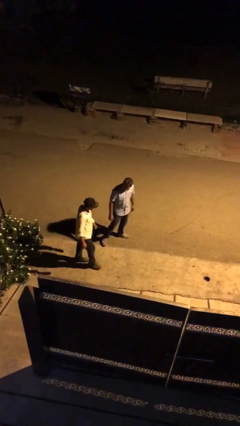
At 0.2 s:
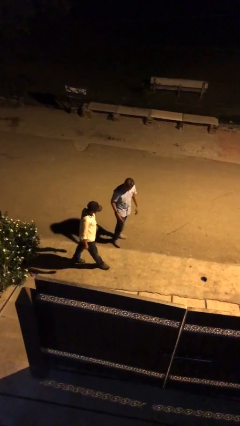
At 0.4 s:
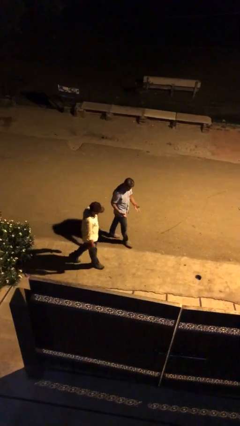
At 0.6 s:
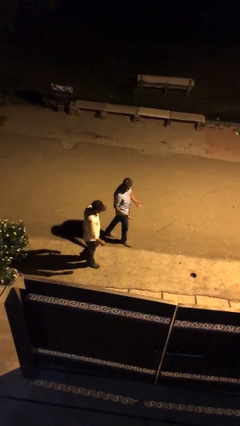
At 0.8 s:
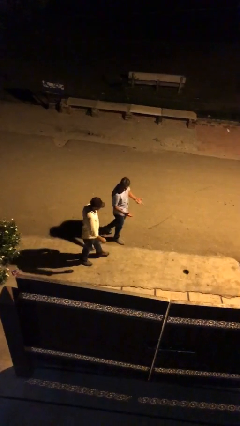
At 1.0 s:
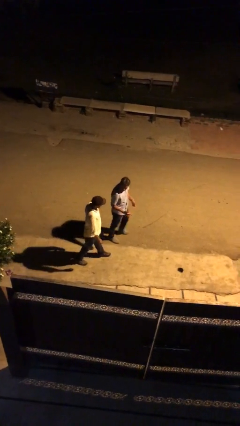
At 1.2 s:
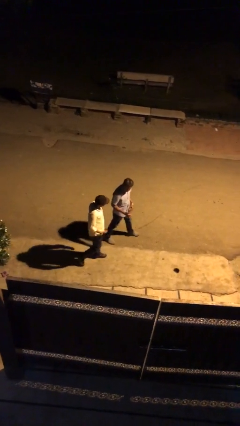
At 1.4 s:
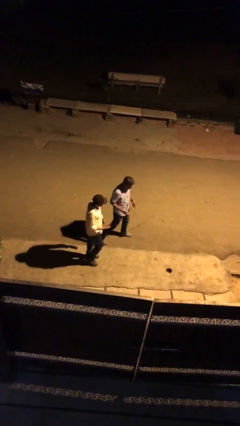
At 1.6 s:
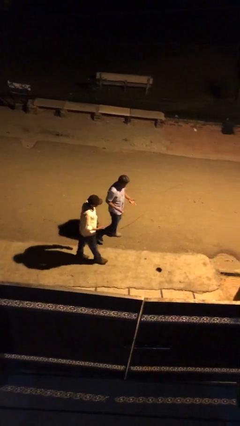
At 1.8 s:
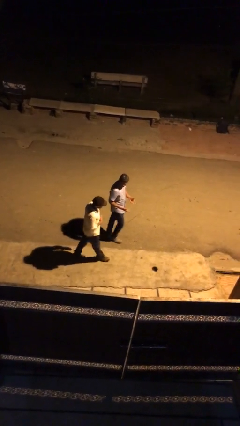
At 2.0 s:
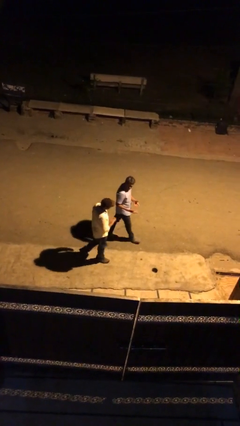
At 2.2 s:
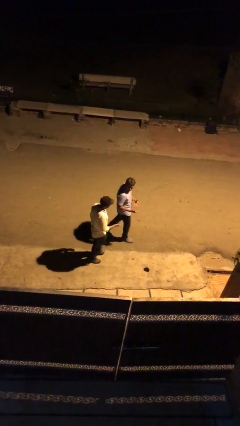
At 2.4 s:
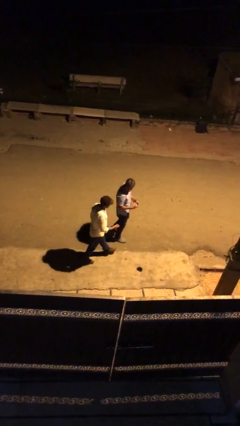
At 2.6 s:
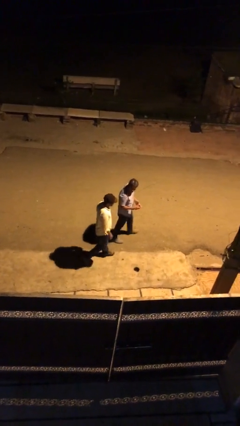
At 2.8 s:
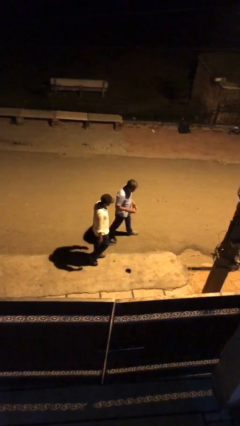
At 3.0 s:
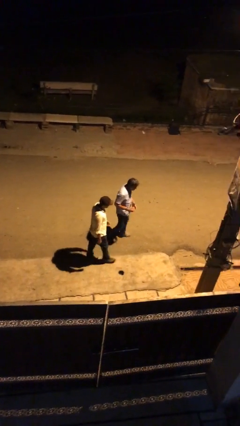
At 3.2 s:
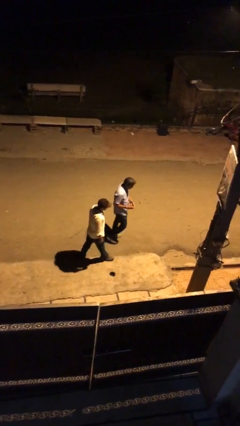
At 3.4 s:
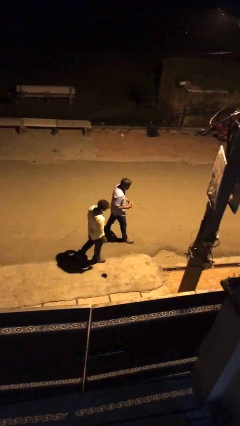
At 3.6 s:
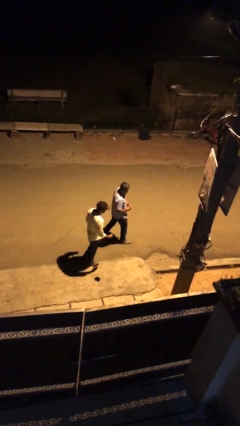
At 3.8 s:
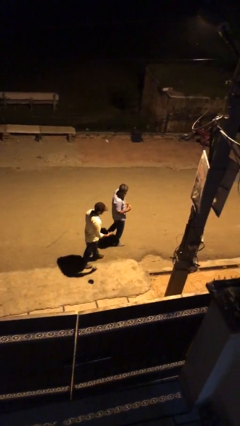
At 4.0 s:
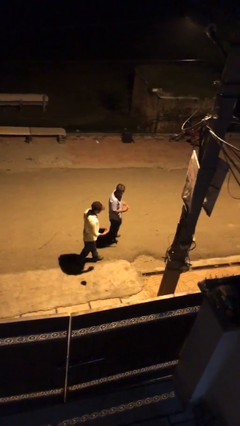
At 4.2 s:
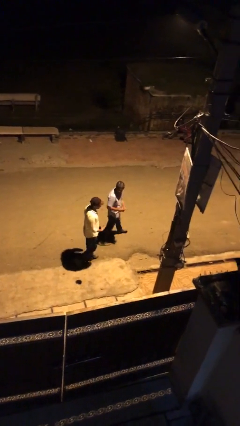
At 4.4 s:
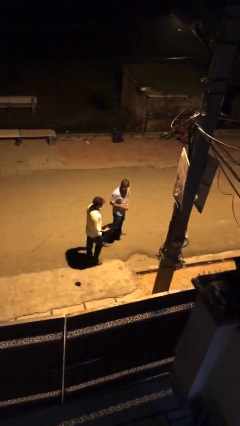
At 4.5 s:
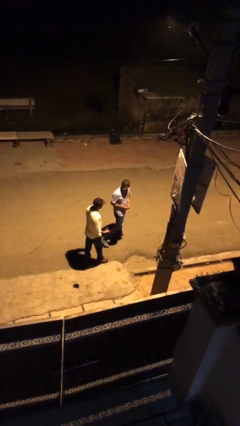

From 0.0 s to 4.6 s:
person talks to person

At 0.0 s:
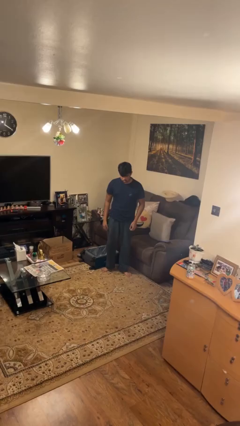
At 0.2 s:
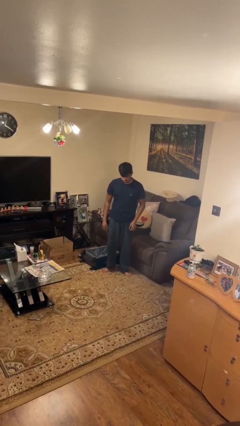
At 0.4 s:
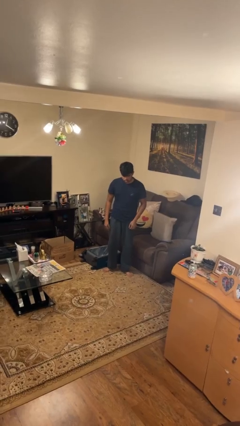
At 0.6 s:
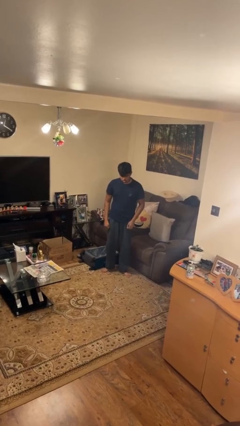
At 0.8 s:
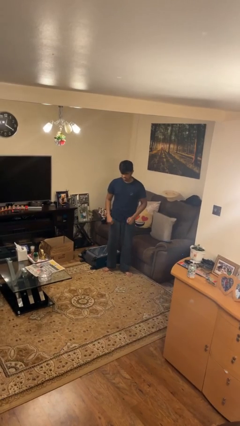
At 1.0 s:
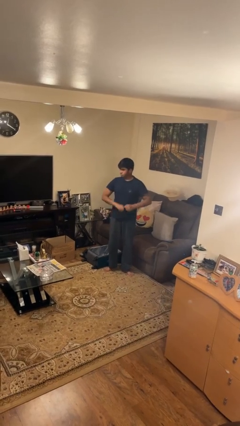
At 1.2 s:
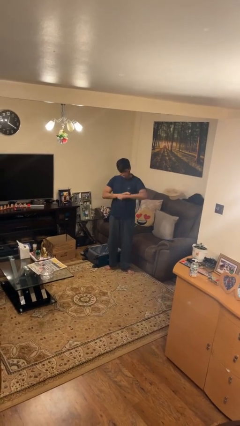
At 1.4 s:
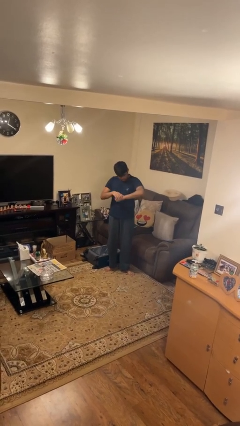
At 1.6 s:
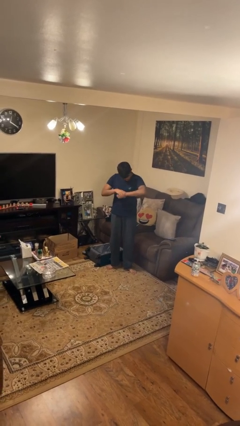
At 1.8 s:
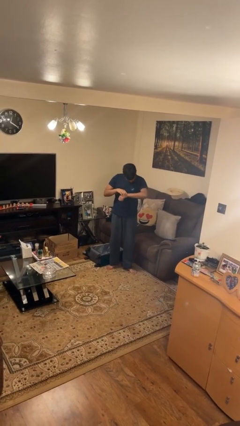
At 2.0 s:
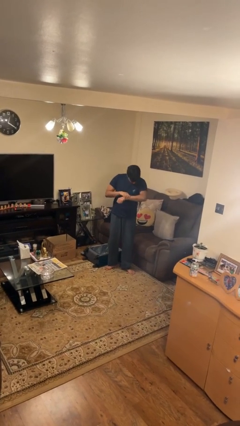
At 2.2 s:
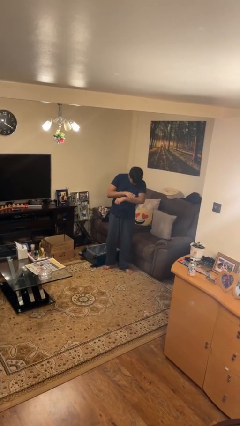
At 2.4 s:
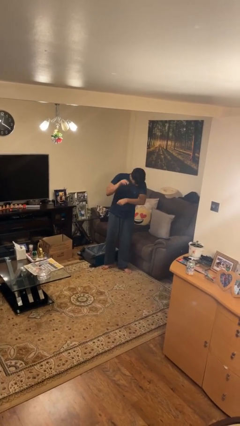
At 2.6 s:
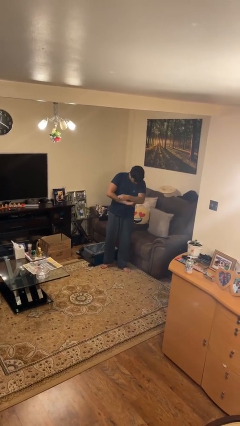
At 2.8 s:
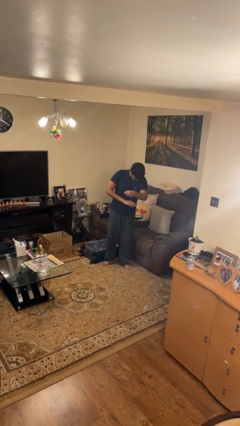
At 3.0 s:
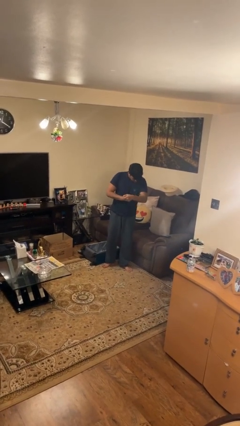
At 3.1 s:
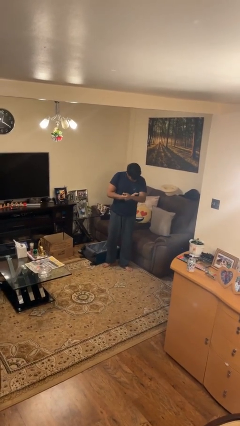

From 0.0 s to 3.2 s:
person swats bug

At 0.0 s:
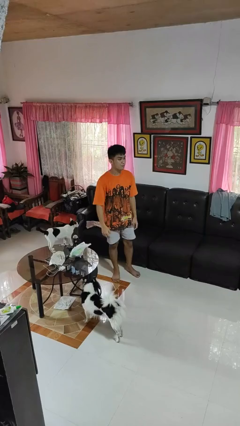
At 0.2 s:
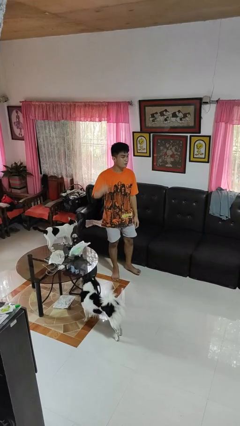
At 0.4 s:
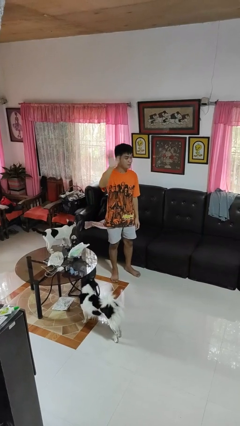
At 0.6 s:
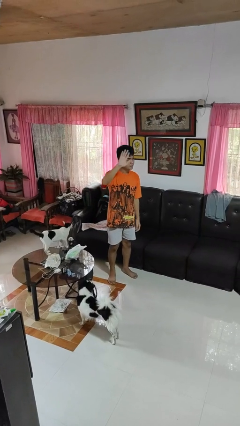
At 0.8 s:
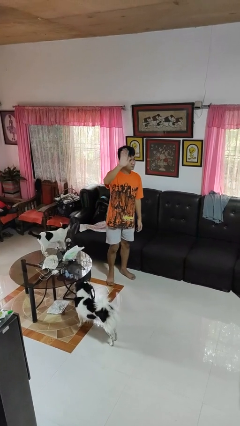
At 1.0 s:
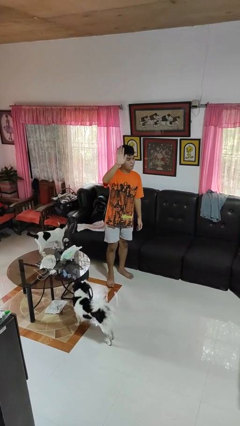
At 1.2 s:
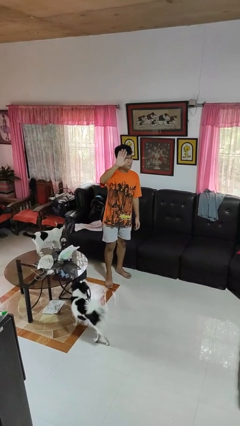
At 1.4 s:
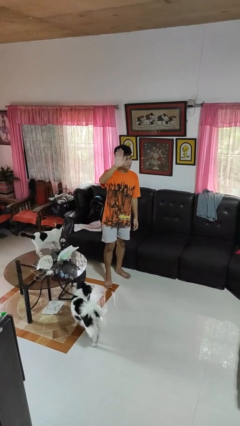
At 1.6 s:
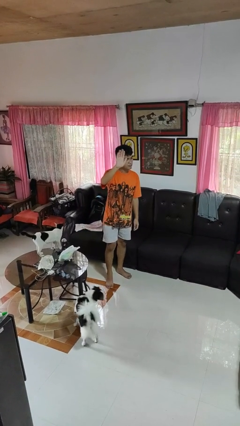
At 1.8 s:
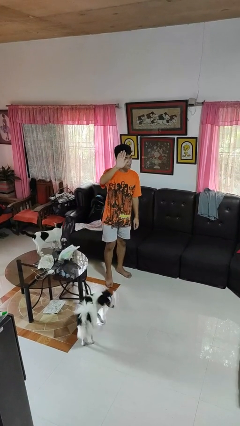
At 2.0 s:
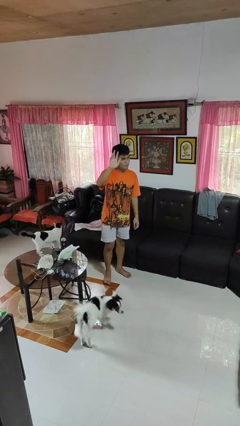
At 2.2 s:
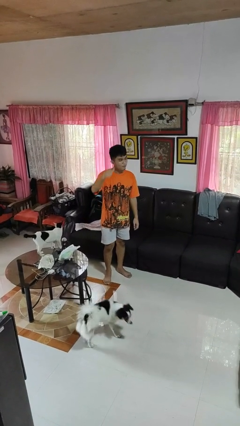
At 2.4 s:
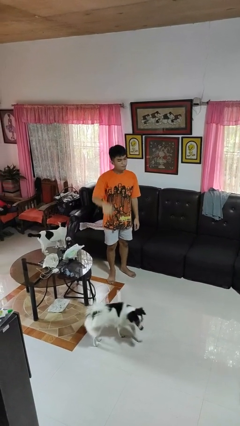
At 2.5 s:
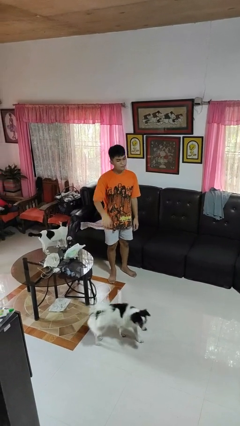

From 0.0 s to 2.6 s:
person waves at person

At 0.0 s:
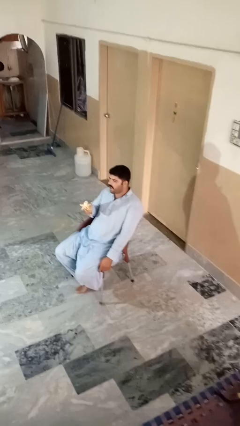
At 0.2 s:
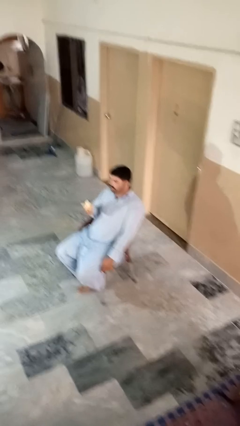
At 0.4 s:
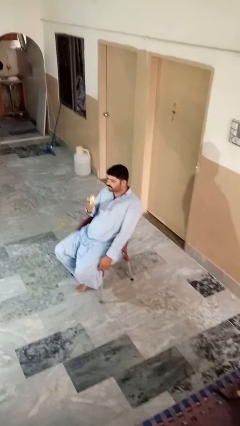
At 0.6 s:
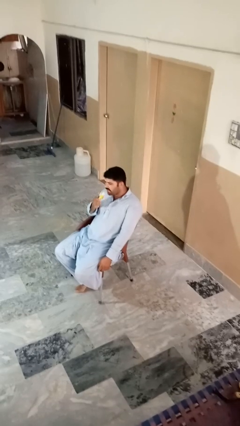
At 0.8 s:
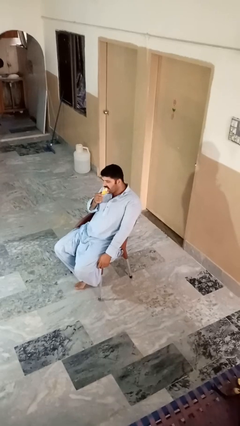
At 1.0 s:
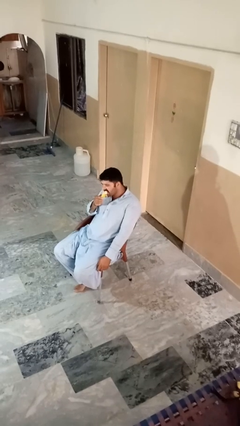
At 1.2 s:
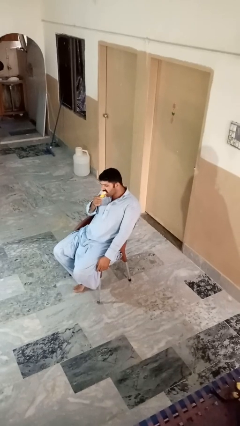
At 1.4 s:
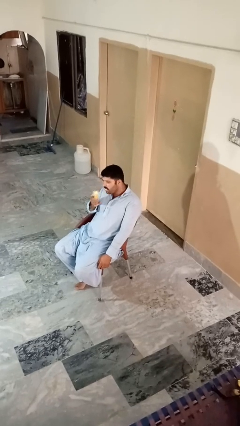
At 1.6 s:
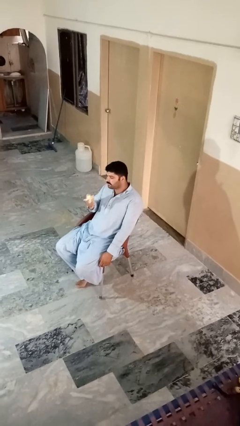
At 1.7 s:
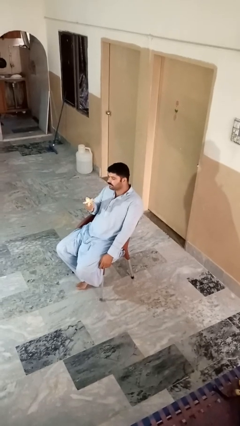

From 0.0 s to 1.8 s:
person eats banana

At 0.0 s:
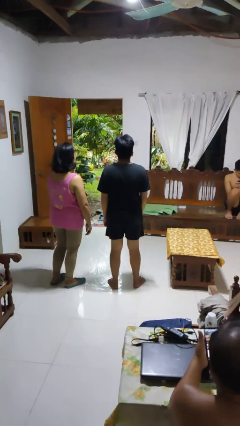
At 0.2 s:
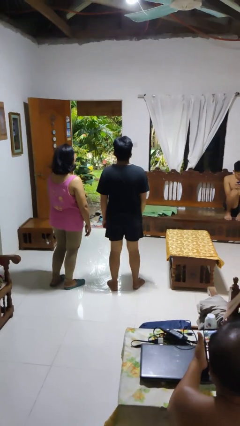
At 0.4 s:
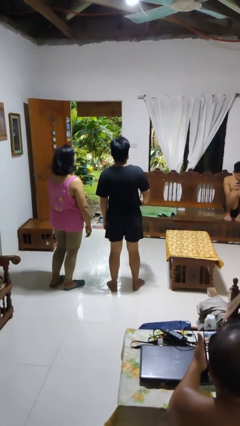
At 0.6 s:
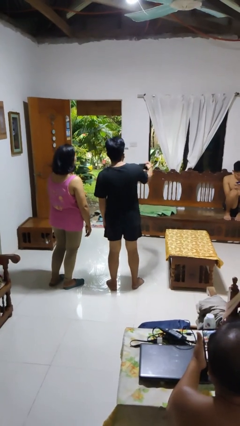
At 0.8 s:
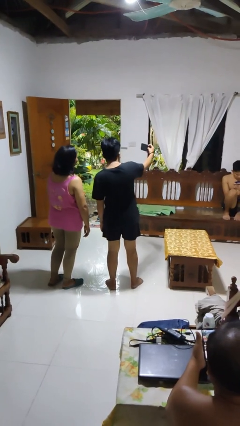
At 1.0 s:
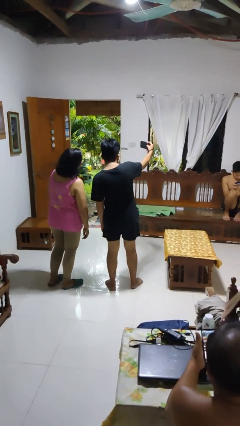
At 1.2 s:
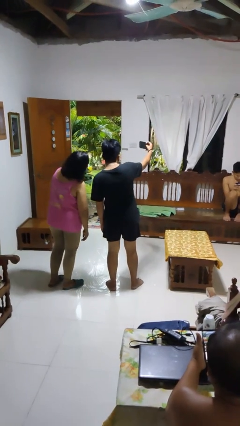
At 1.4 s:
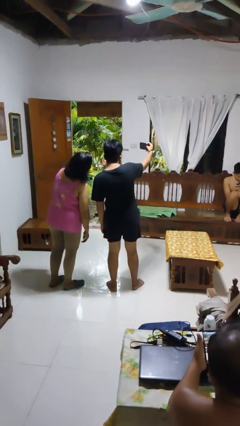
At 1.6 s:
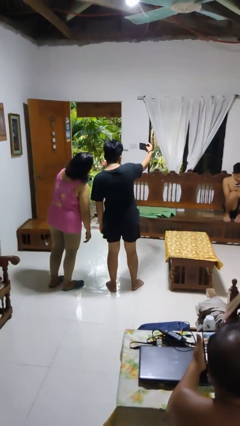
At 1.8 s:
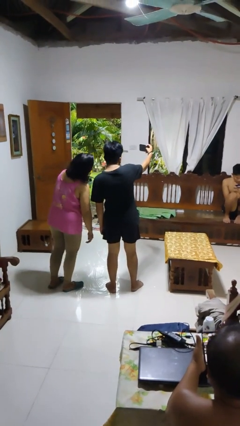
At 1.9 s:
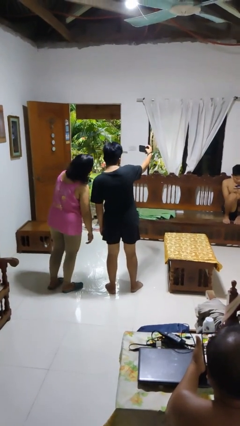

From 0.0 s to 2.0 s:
person takes selfie with person

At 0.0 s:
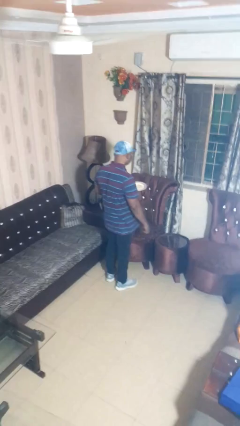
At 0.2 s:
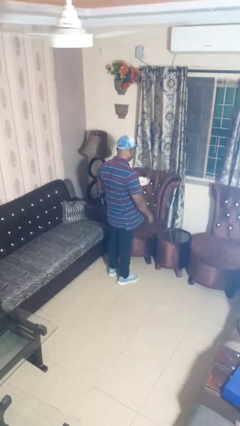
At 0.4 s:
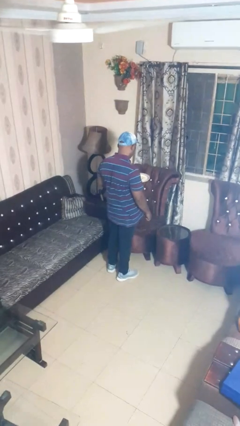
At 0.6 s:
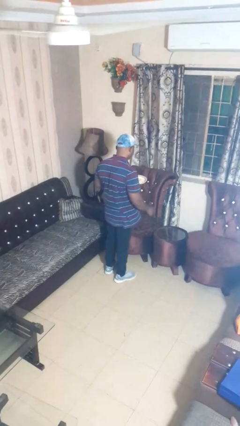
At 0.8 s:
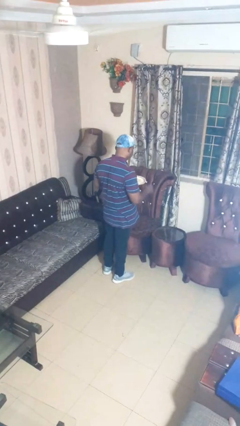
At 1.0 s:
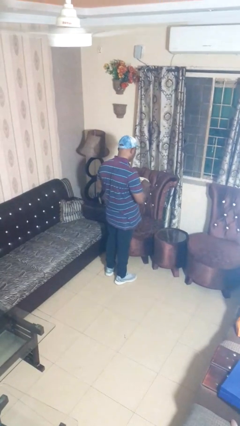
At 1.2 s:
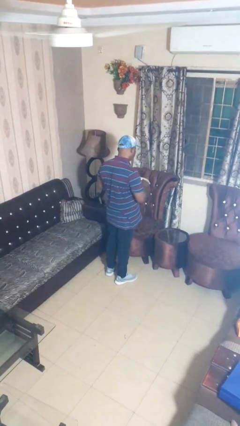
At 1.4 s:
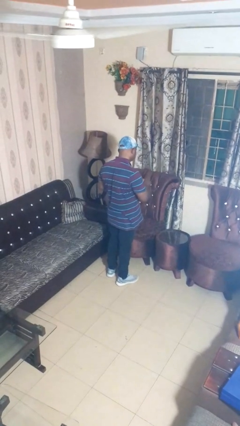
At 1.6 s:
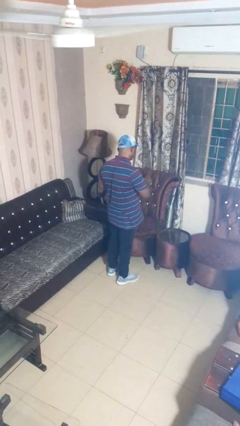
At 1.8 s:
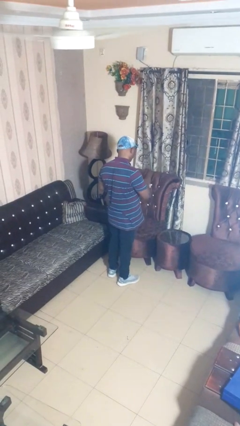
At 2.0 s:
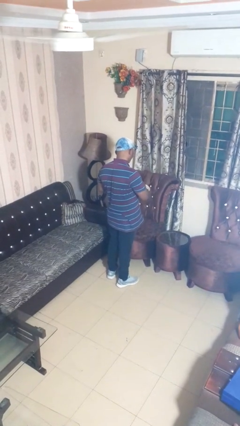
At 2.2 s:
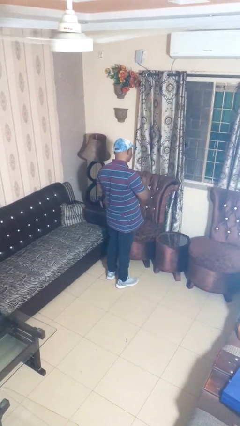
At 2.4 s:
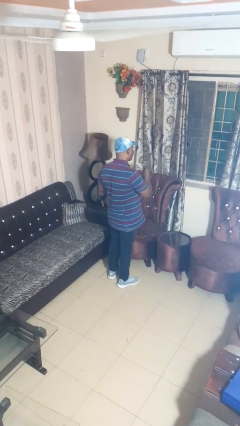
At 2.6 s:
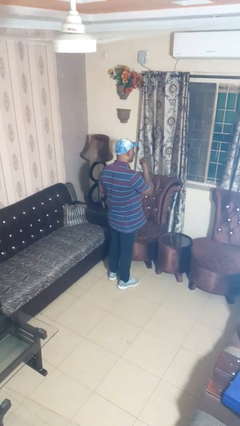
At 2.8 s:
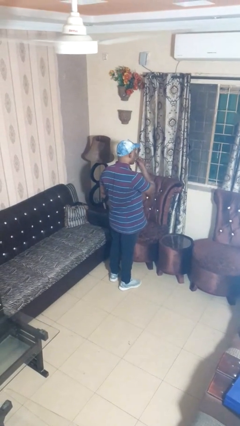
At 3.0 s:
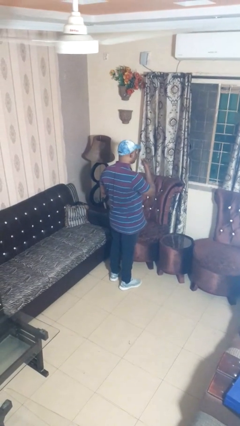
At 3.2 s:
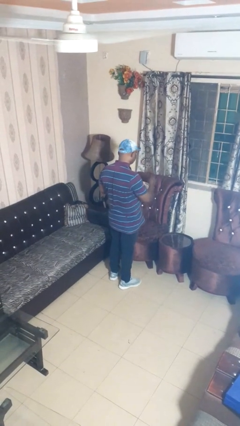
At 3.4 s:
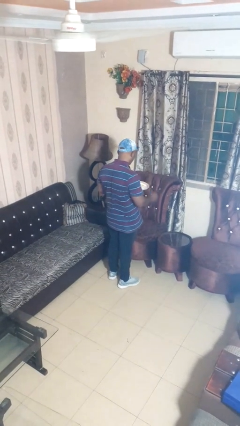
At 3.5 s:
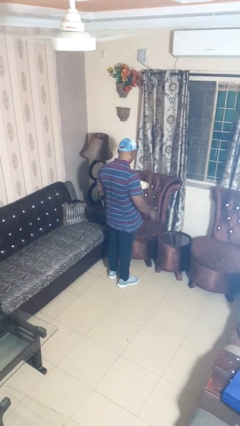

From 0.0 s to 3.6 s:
person eats with hands
